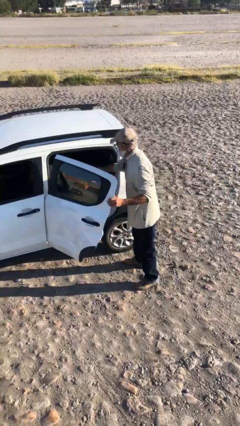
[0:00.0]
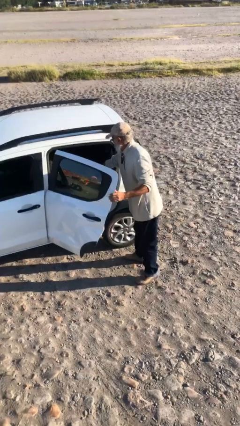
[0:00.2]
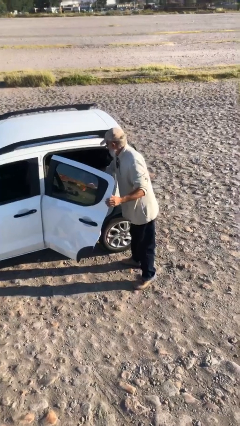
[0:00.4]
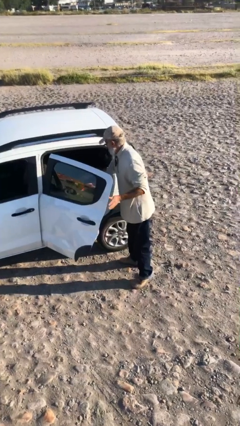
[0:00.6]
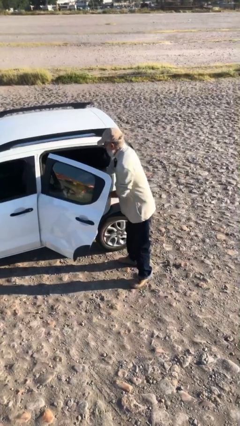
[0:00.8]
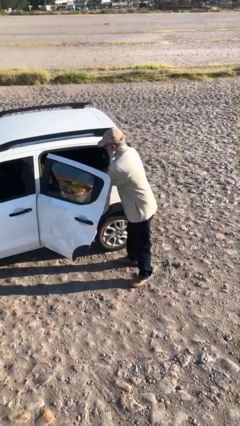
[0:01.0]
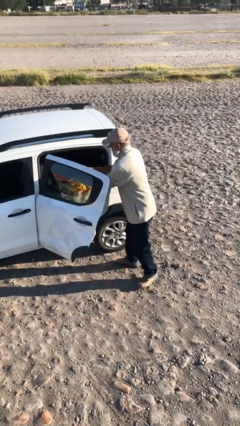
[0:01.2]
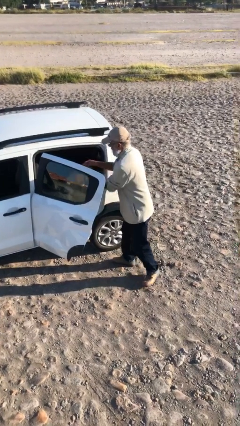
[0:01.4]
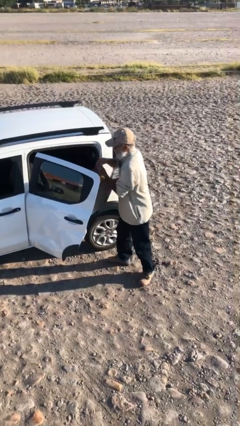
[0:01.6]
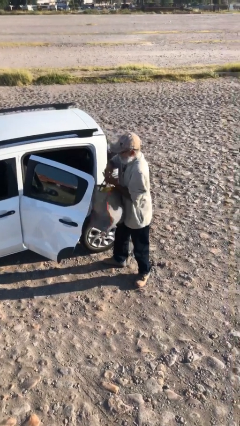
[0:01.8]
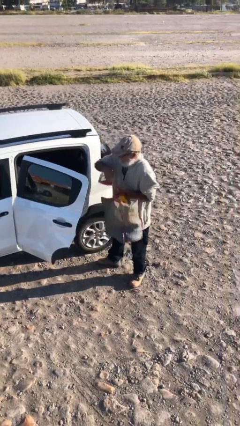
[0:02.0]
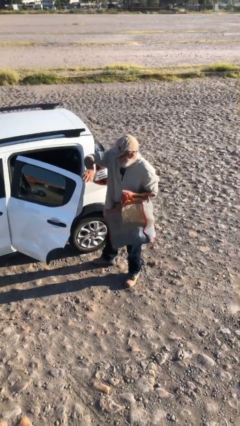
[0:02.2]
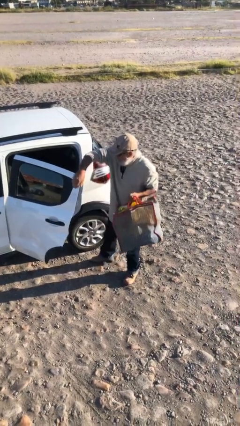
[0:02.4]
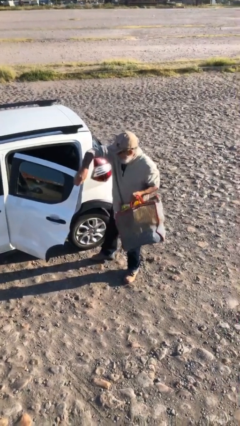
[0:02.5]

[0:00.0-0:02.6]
person unloads car

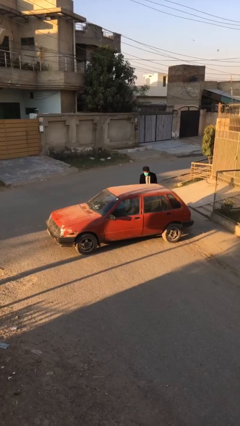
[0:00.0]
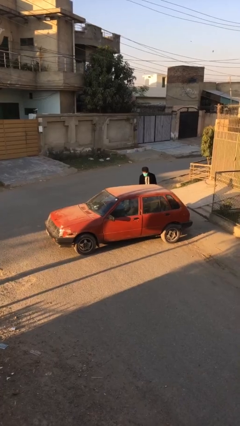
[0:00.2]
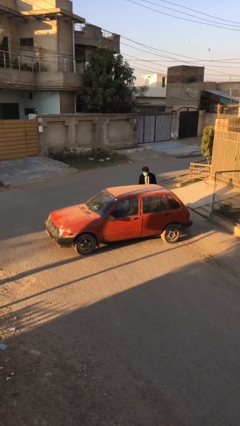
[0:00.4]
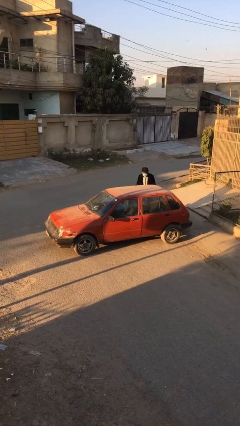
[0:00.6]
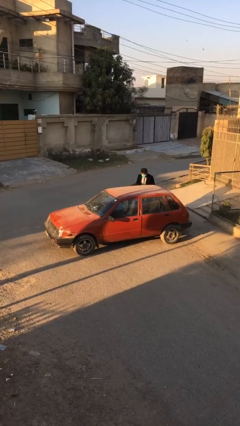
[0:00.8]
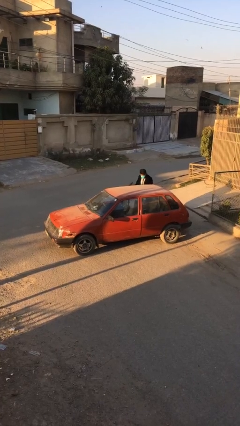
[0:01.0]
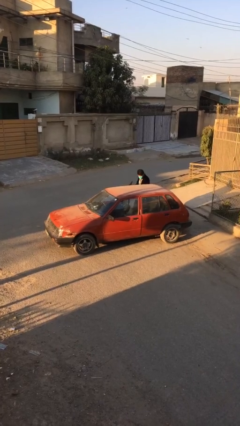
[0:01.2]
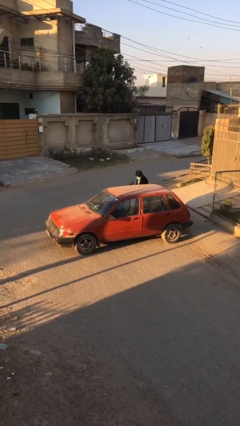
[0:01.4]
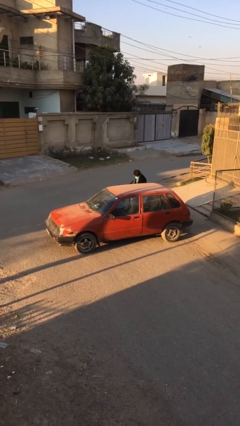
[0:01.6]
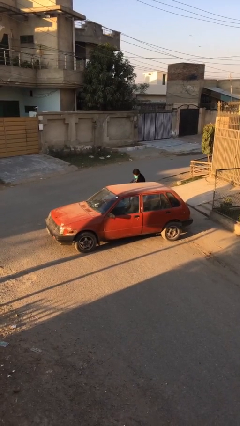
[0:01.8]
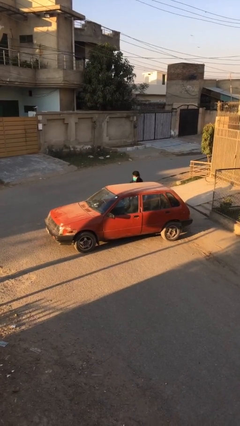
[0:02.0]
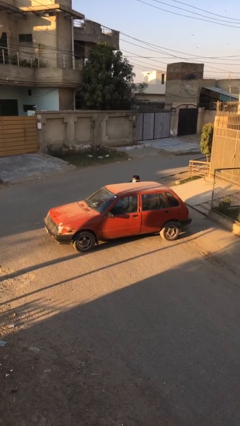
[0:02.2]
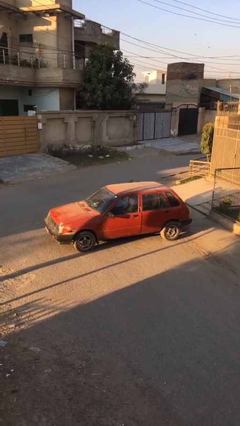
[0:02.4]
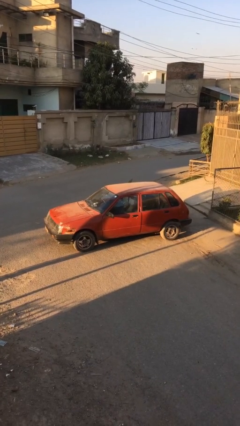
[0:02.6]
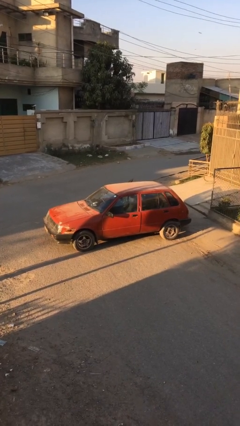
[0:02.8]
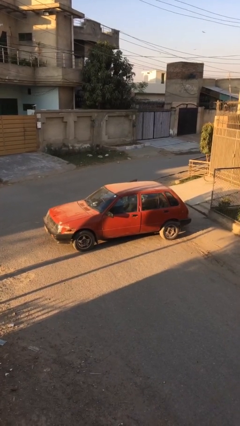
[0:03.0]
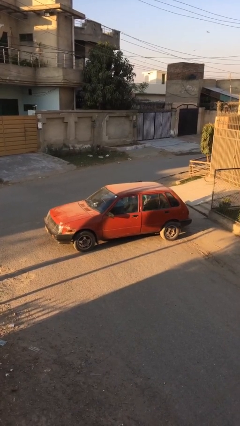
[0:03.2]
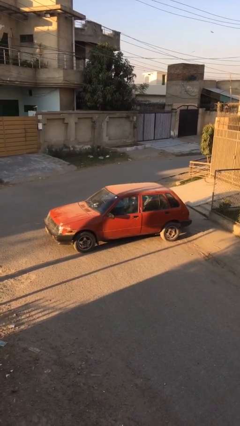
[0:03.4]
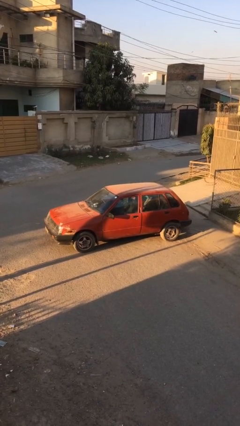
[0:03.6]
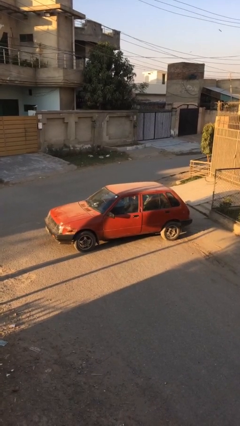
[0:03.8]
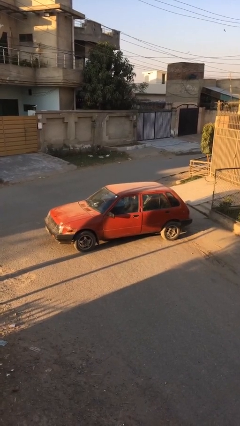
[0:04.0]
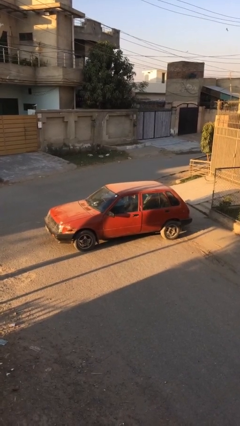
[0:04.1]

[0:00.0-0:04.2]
car picks up person

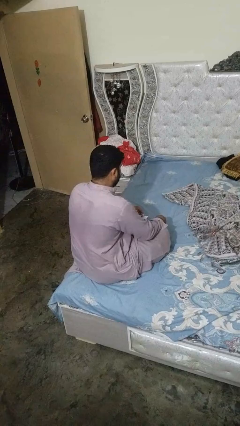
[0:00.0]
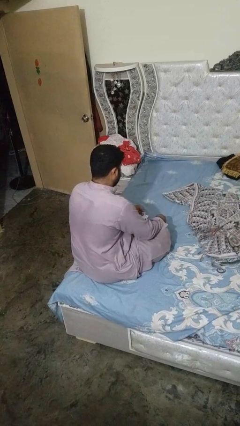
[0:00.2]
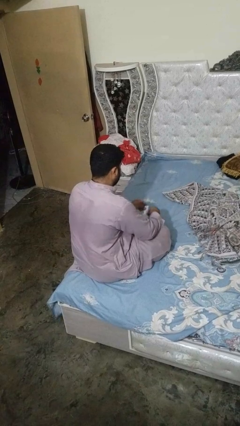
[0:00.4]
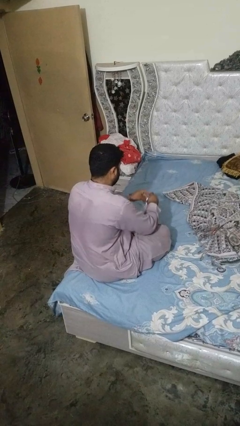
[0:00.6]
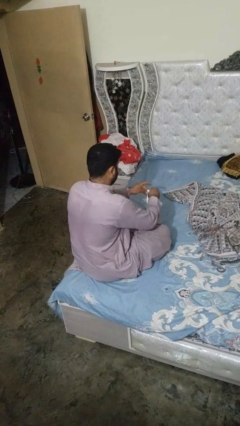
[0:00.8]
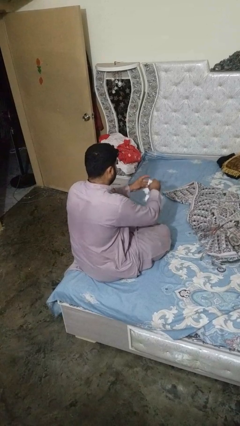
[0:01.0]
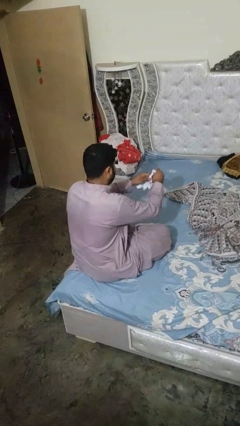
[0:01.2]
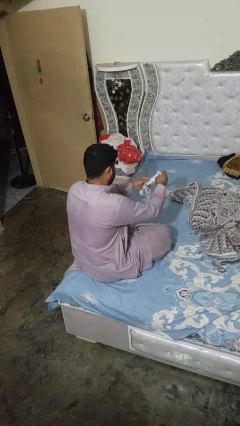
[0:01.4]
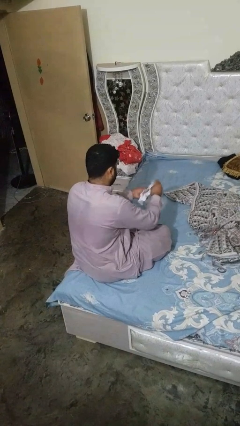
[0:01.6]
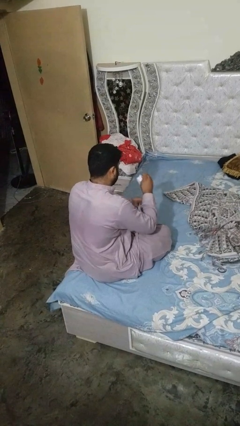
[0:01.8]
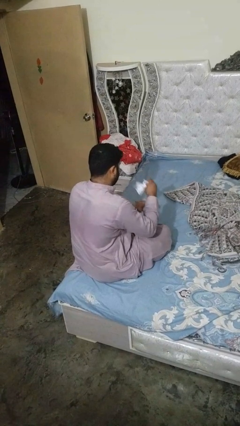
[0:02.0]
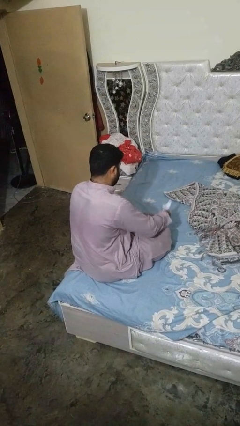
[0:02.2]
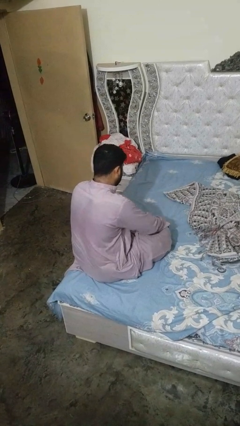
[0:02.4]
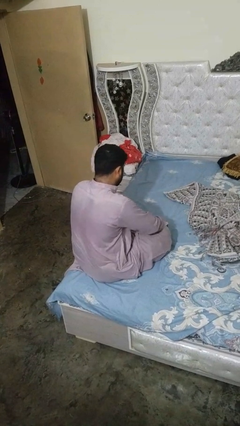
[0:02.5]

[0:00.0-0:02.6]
person tears paper

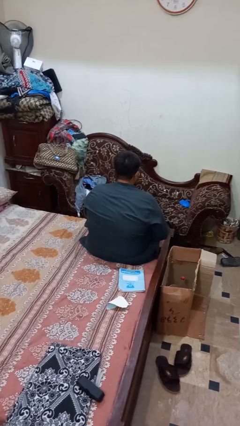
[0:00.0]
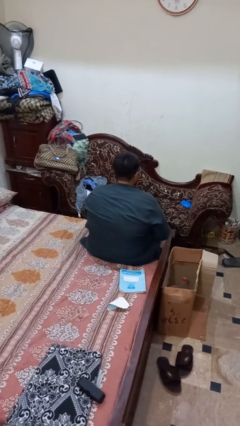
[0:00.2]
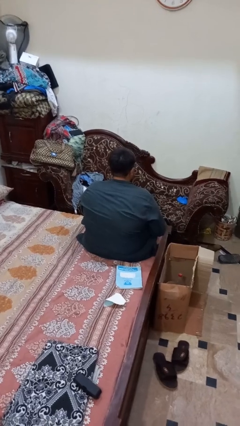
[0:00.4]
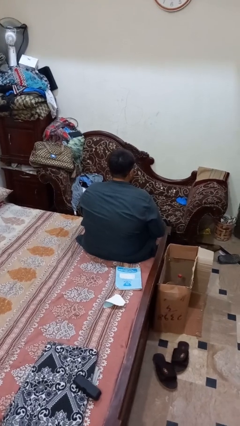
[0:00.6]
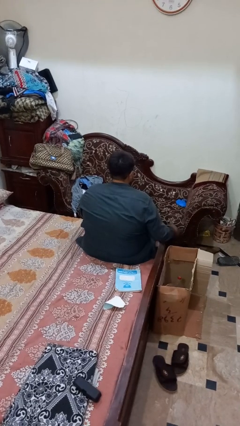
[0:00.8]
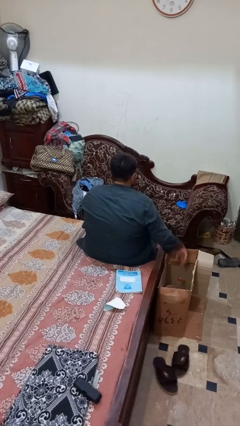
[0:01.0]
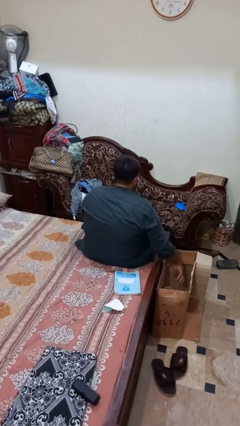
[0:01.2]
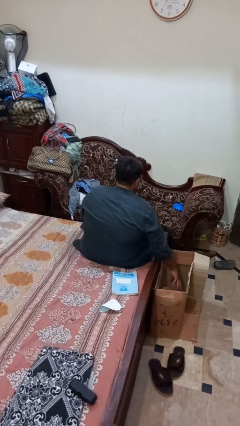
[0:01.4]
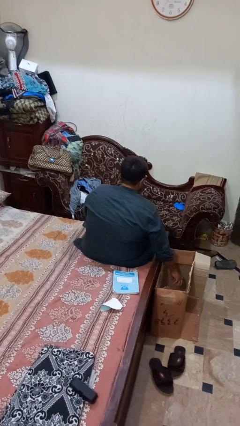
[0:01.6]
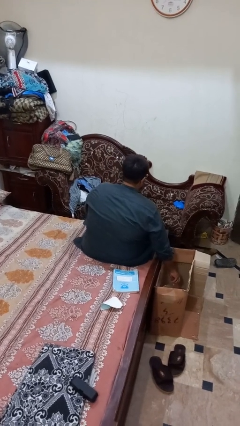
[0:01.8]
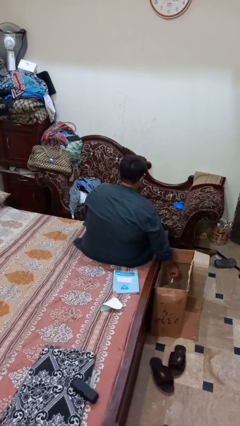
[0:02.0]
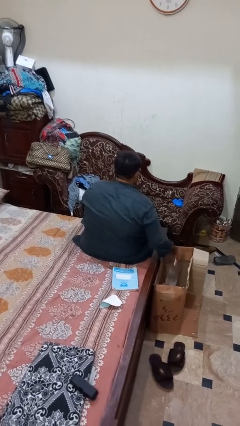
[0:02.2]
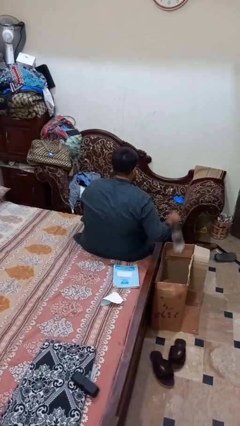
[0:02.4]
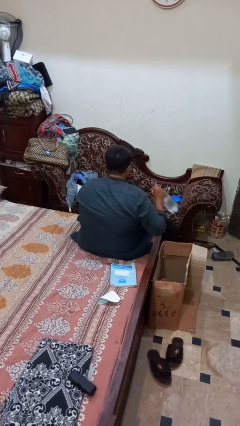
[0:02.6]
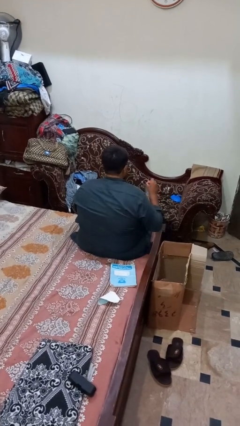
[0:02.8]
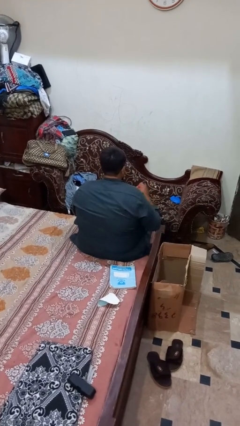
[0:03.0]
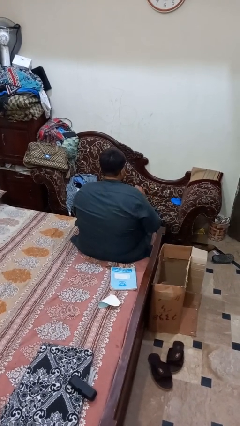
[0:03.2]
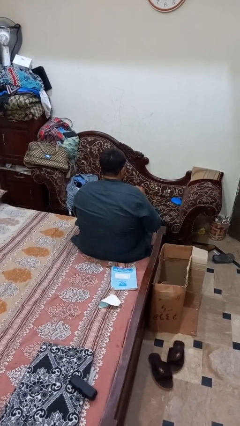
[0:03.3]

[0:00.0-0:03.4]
person takes object from box

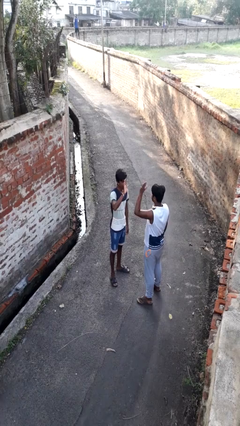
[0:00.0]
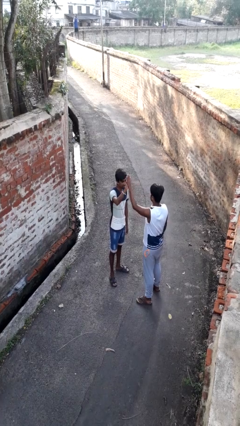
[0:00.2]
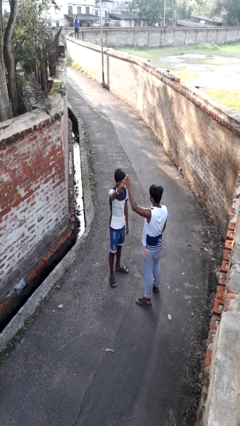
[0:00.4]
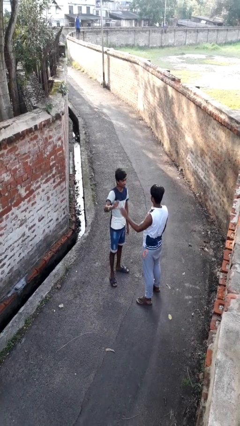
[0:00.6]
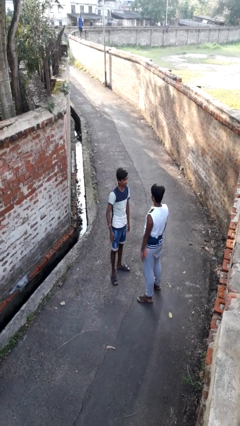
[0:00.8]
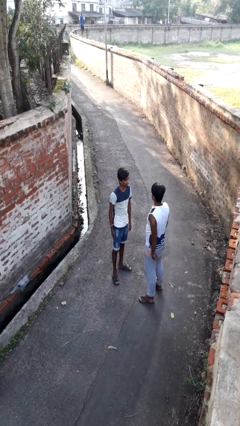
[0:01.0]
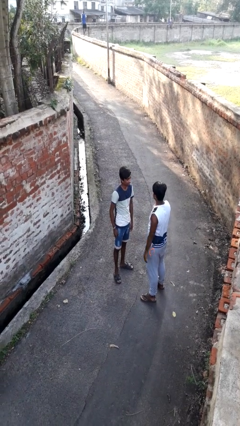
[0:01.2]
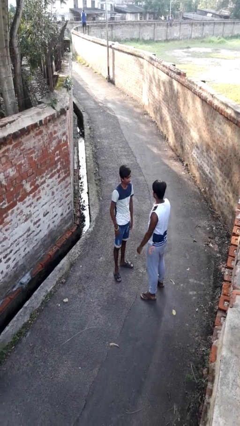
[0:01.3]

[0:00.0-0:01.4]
person highfives hand

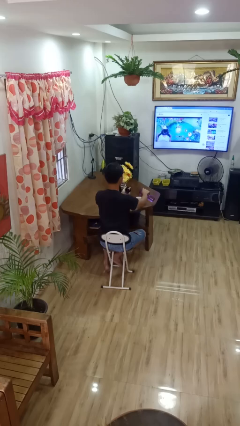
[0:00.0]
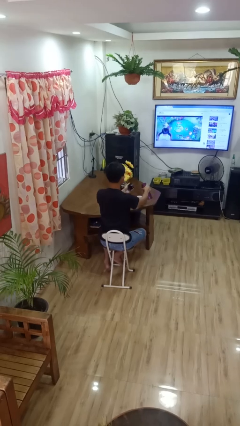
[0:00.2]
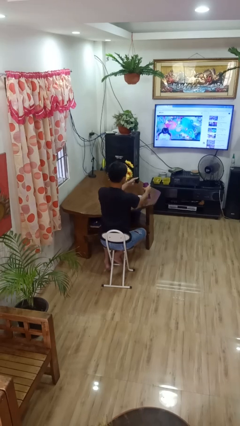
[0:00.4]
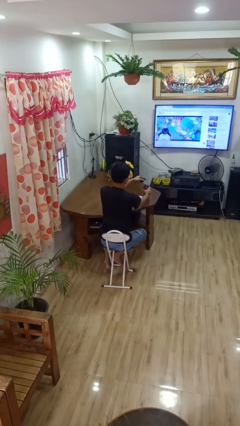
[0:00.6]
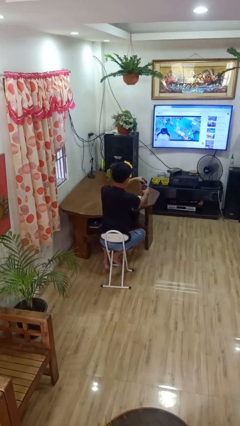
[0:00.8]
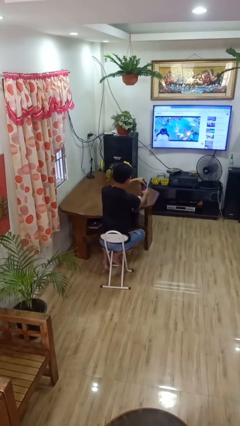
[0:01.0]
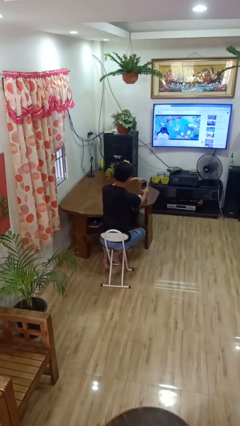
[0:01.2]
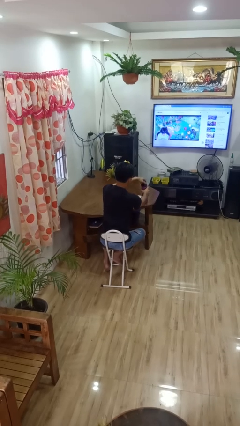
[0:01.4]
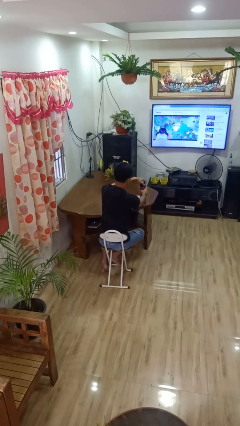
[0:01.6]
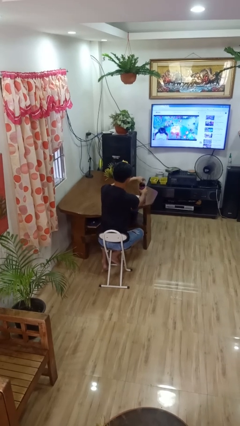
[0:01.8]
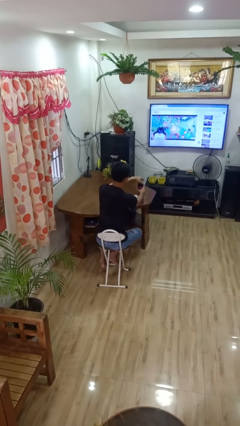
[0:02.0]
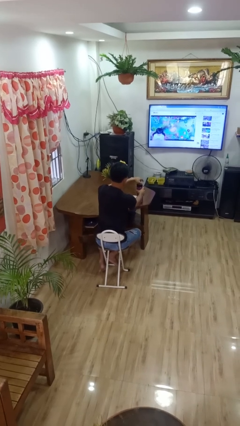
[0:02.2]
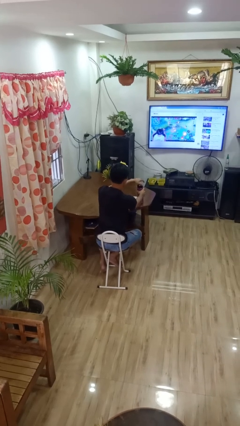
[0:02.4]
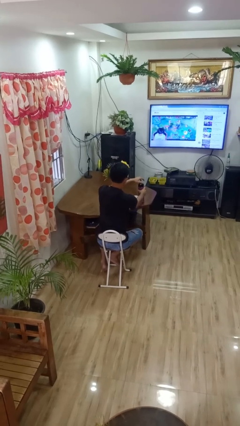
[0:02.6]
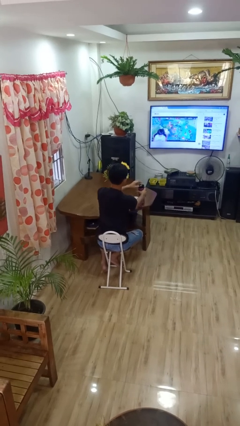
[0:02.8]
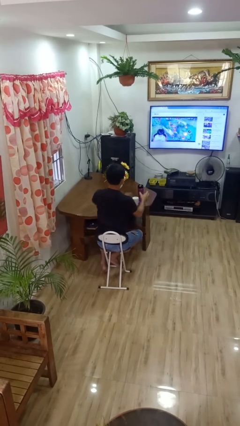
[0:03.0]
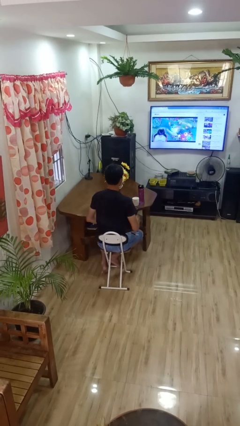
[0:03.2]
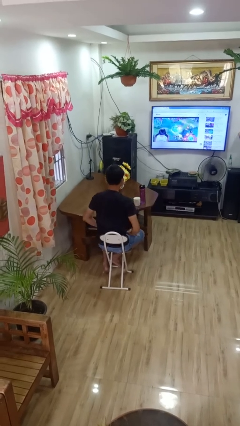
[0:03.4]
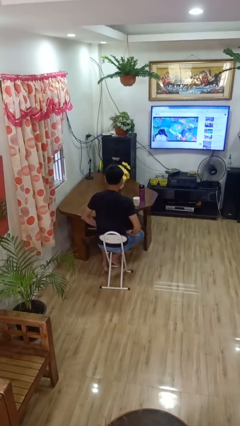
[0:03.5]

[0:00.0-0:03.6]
person screws lid to bottle
